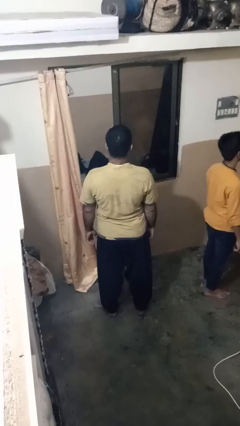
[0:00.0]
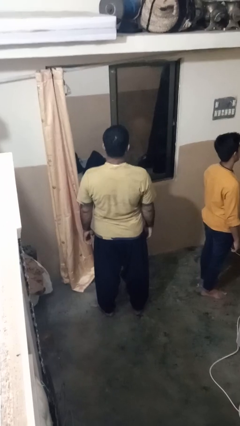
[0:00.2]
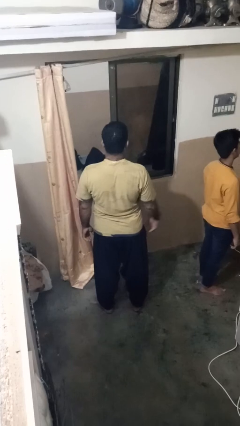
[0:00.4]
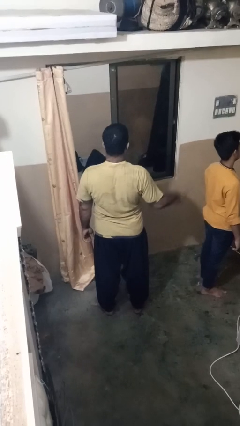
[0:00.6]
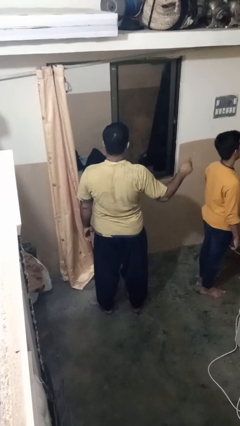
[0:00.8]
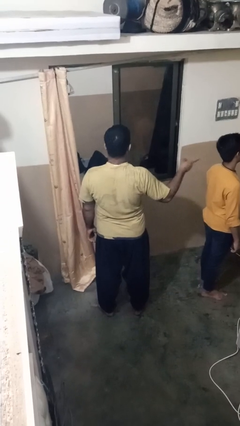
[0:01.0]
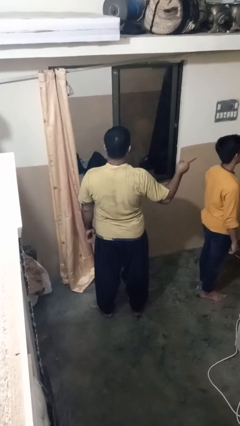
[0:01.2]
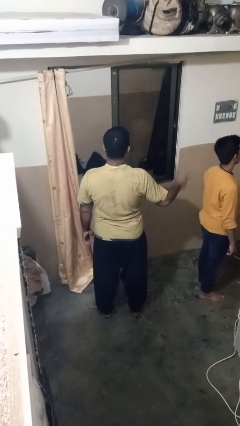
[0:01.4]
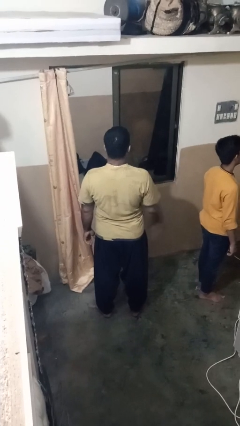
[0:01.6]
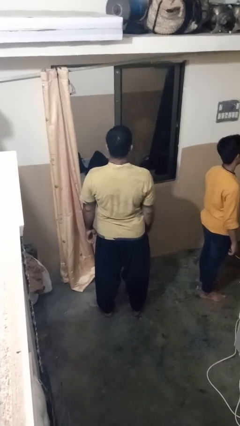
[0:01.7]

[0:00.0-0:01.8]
person points at person

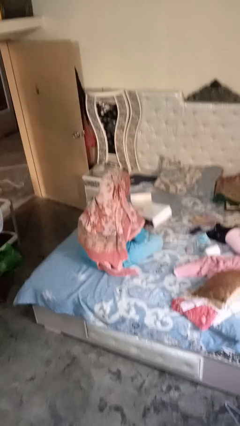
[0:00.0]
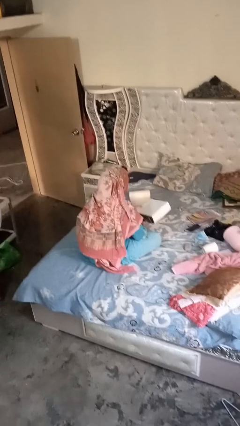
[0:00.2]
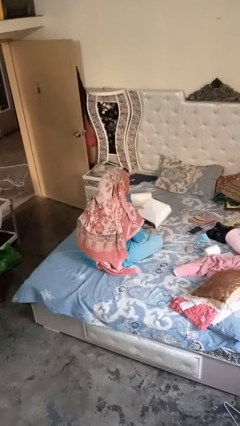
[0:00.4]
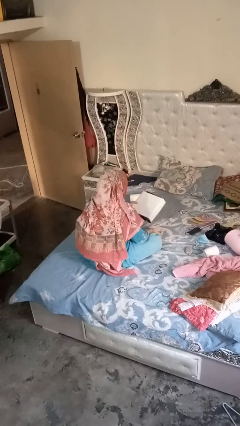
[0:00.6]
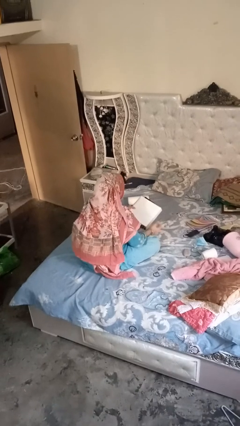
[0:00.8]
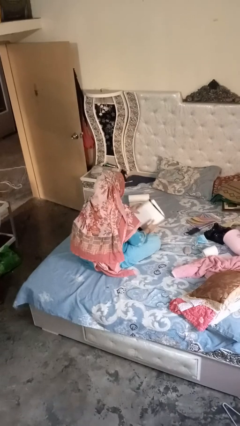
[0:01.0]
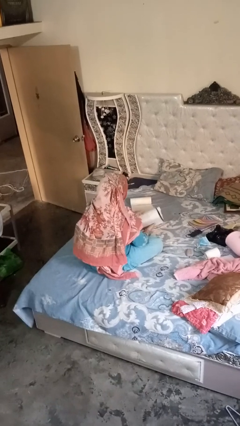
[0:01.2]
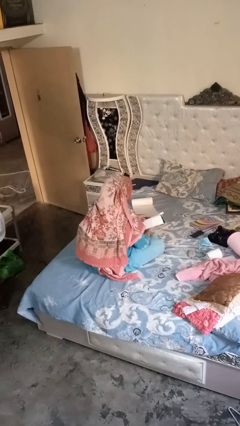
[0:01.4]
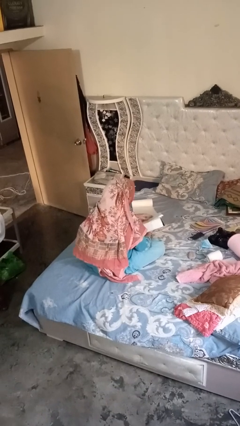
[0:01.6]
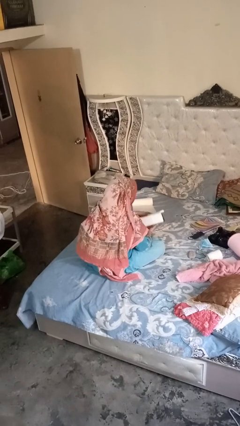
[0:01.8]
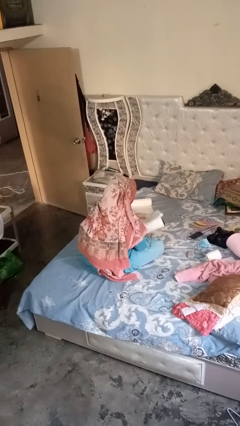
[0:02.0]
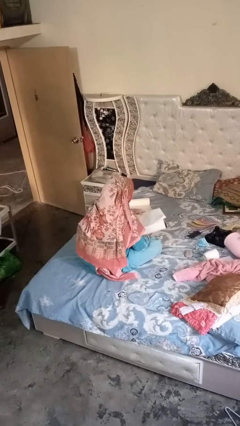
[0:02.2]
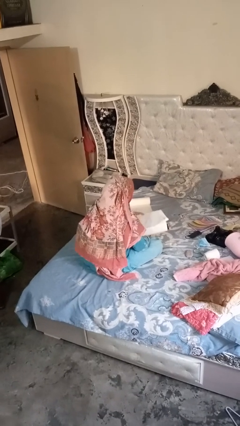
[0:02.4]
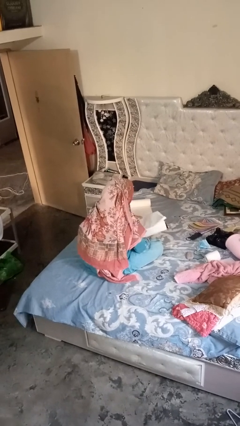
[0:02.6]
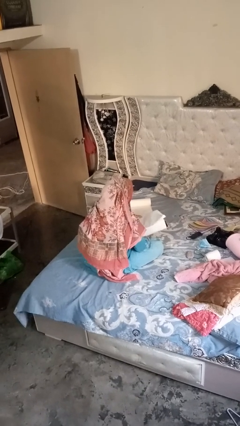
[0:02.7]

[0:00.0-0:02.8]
person wraps box

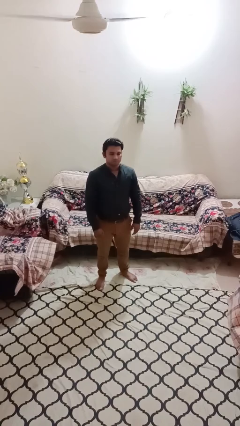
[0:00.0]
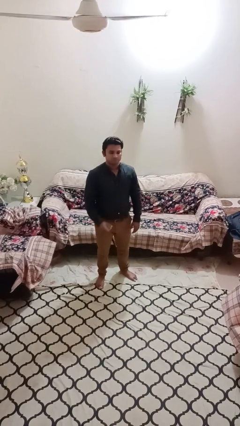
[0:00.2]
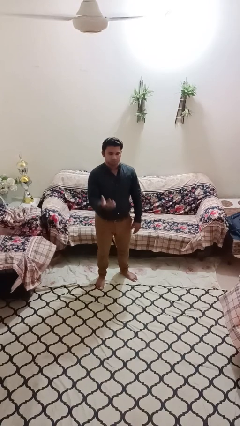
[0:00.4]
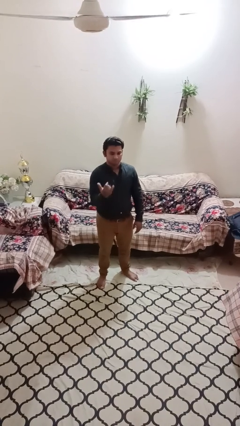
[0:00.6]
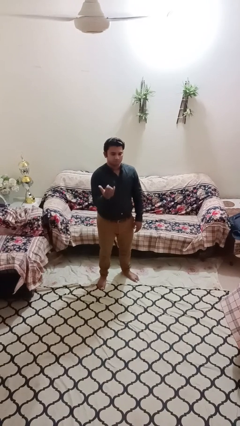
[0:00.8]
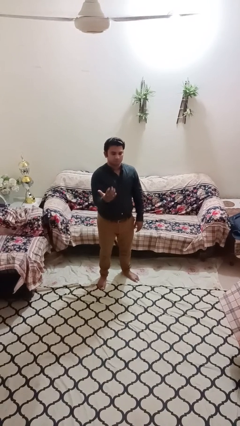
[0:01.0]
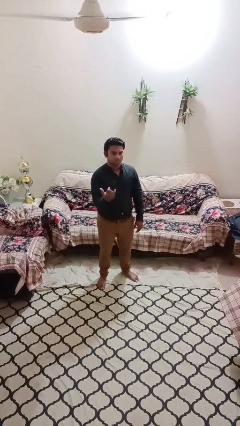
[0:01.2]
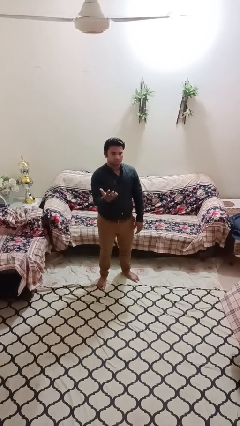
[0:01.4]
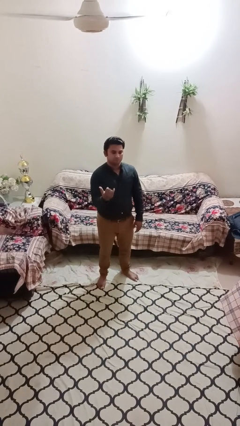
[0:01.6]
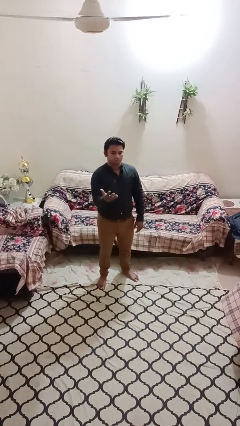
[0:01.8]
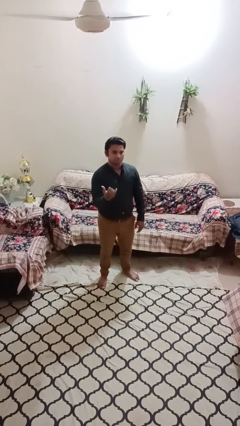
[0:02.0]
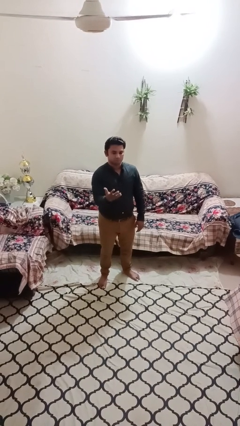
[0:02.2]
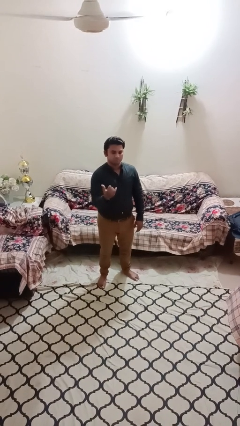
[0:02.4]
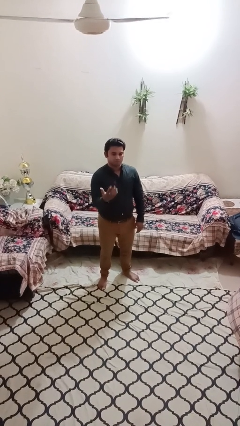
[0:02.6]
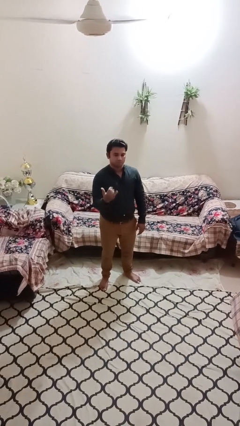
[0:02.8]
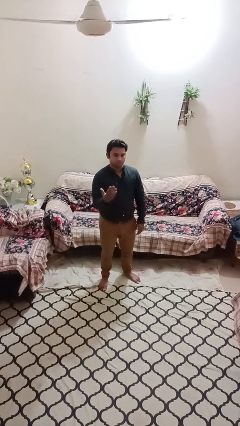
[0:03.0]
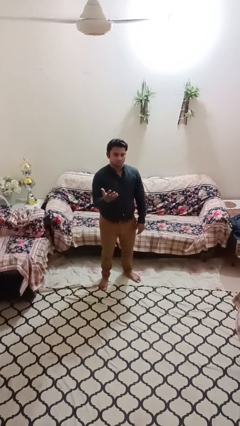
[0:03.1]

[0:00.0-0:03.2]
person gestures come here

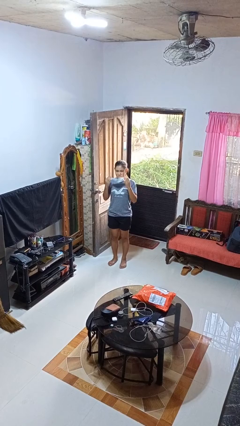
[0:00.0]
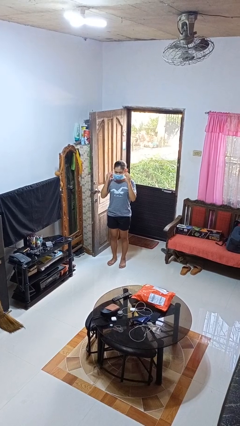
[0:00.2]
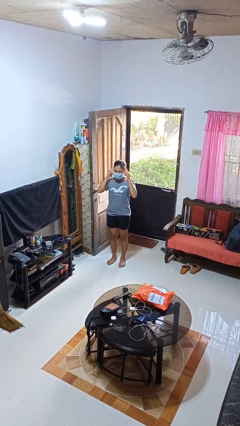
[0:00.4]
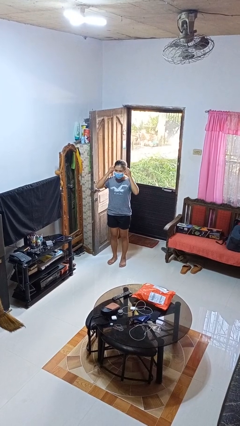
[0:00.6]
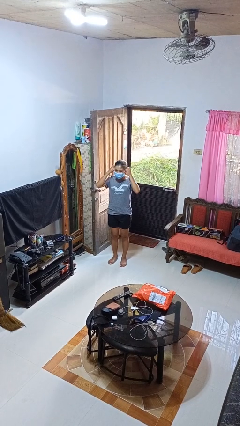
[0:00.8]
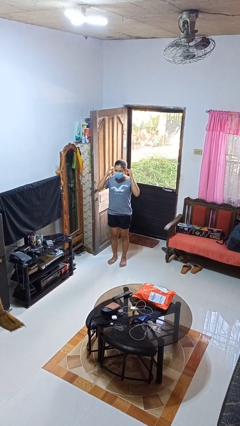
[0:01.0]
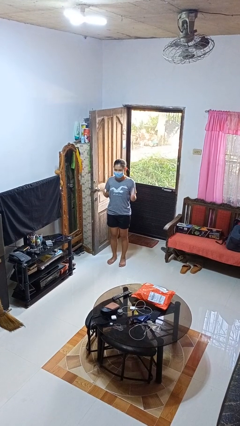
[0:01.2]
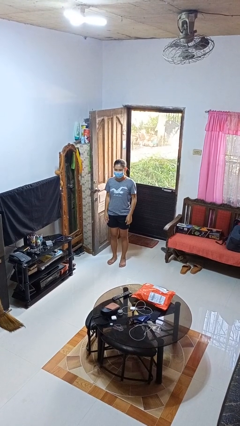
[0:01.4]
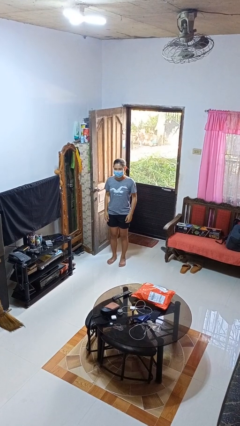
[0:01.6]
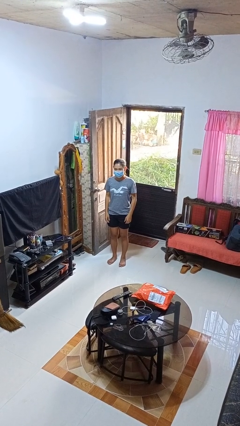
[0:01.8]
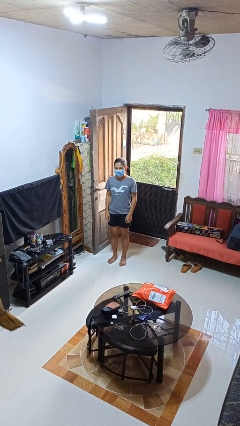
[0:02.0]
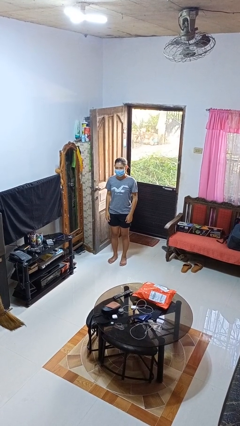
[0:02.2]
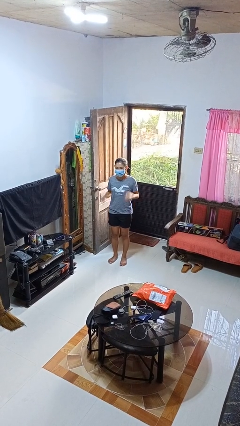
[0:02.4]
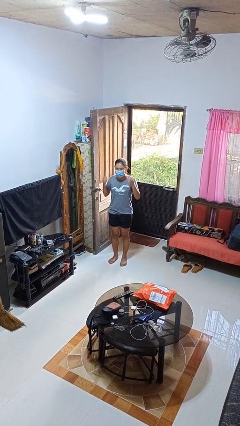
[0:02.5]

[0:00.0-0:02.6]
person puts on facemask

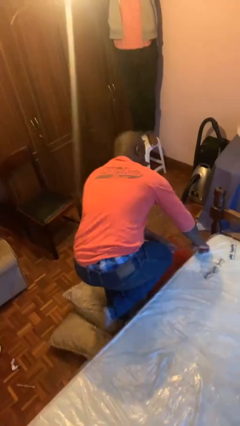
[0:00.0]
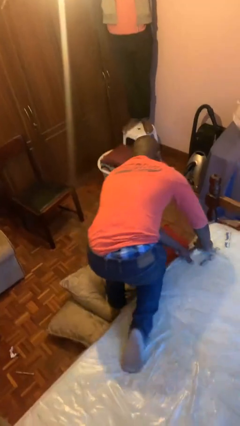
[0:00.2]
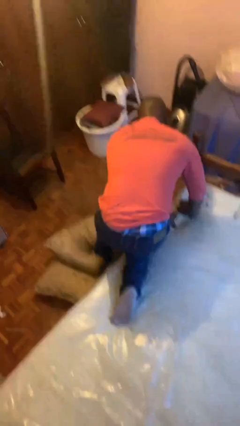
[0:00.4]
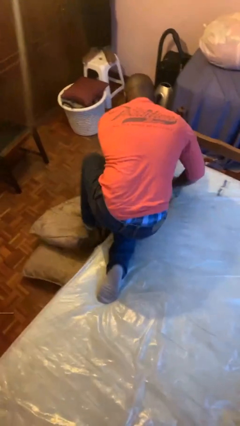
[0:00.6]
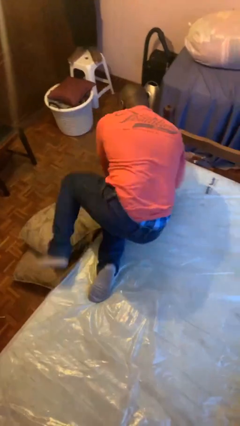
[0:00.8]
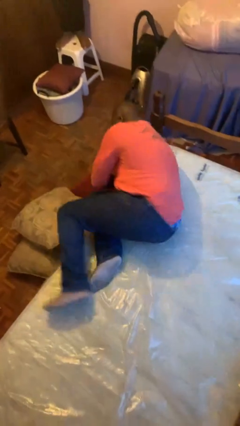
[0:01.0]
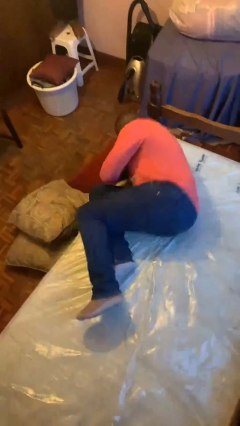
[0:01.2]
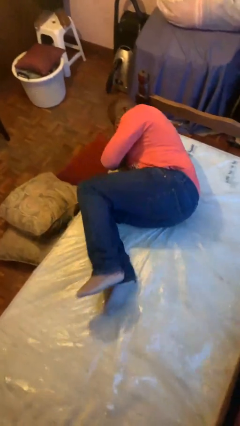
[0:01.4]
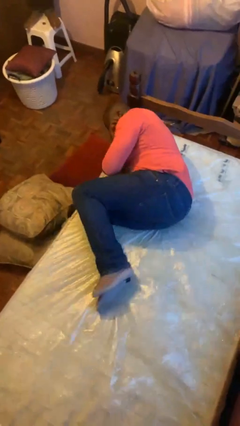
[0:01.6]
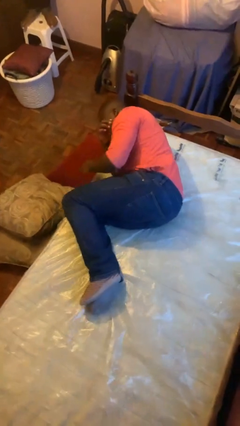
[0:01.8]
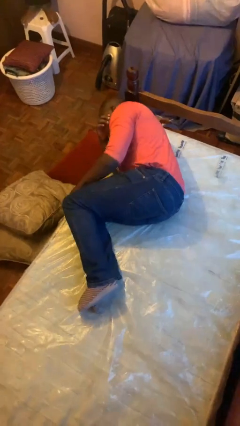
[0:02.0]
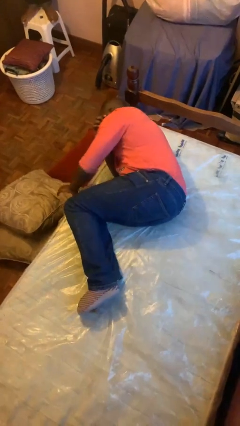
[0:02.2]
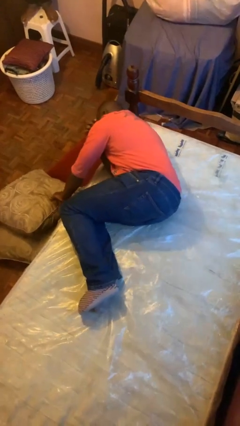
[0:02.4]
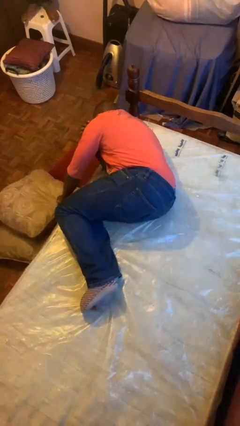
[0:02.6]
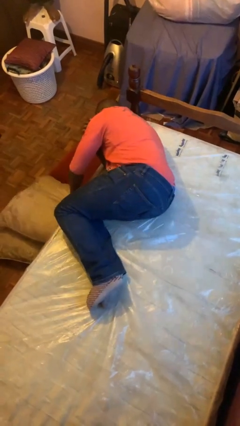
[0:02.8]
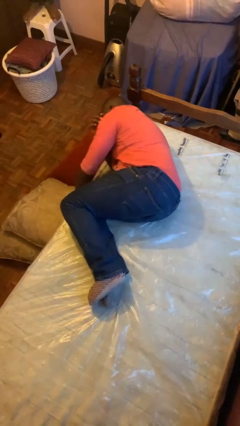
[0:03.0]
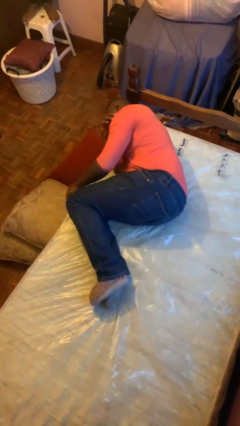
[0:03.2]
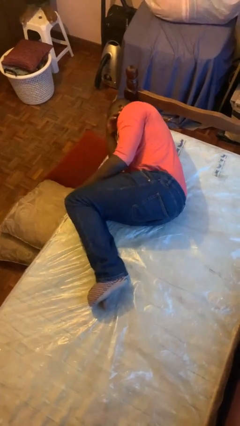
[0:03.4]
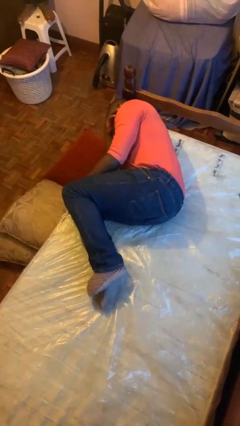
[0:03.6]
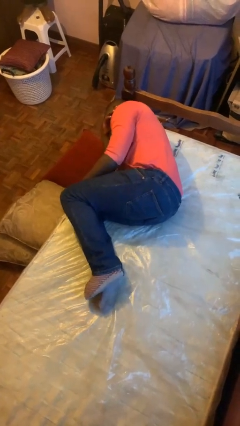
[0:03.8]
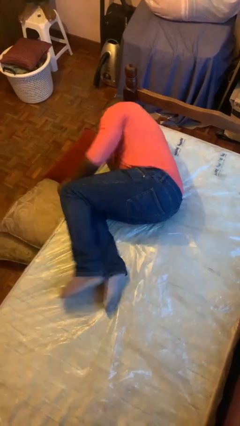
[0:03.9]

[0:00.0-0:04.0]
person lies down on bed

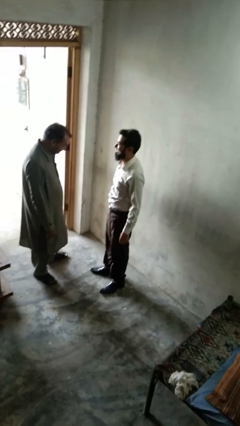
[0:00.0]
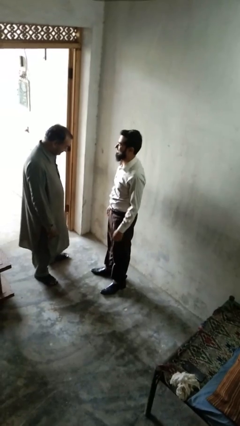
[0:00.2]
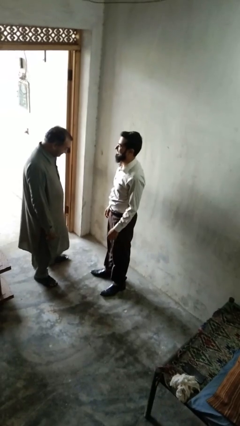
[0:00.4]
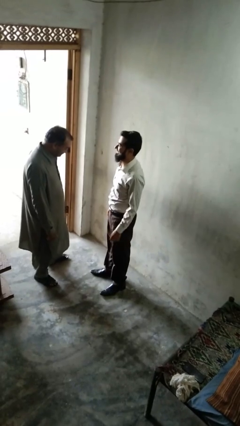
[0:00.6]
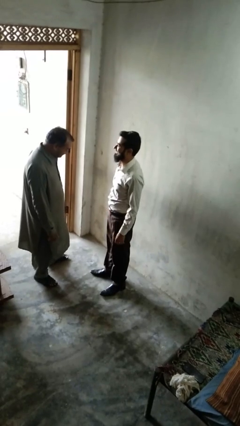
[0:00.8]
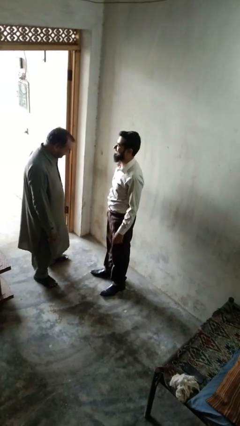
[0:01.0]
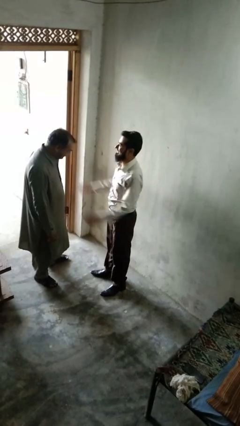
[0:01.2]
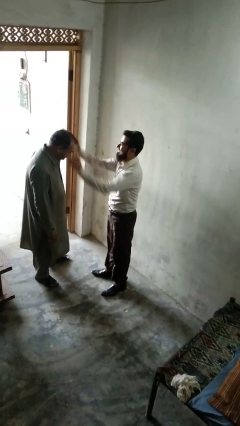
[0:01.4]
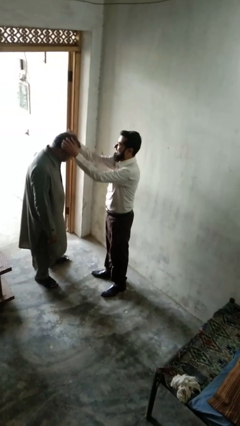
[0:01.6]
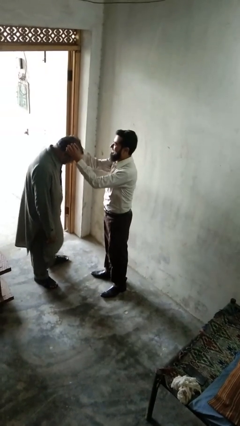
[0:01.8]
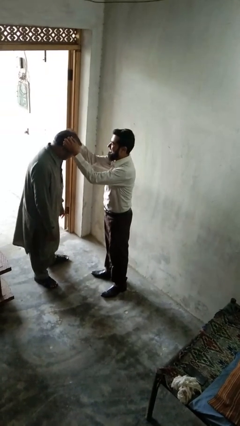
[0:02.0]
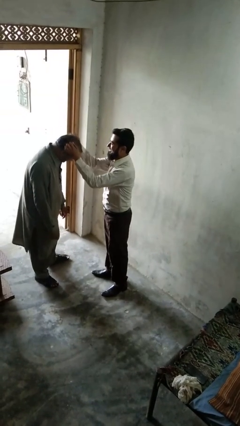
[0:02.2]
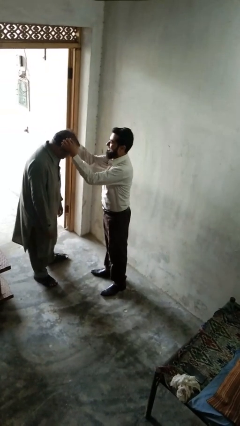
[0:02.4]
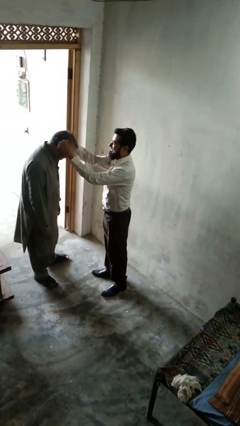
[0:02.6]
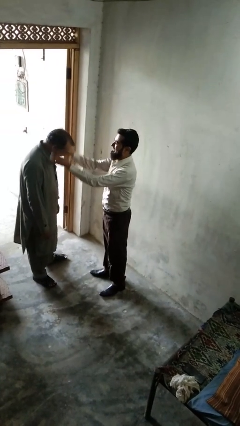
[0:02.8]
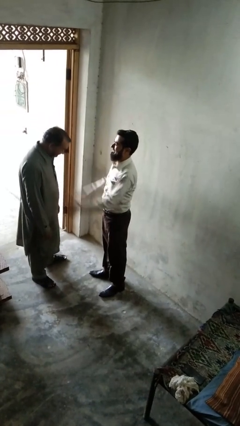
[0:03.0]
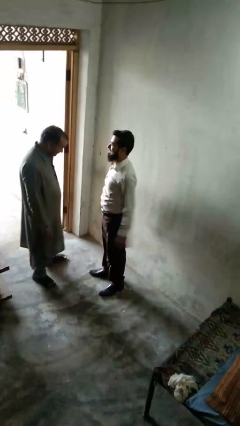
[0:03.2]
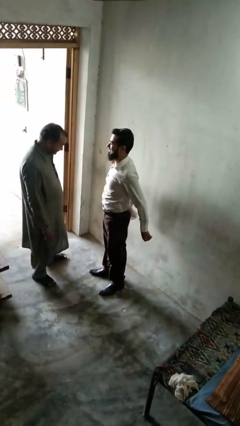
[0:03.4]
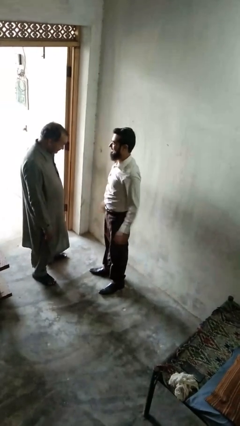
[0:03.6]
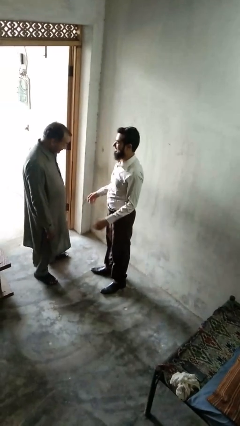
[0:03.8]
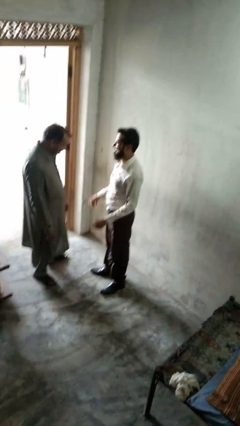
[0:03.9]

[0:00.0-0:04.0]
person grabs person by hair
